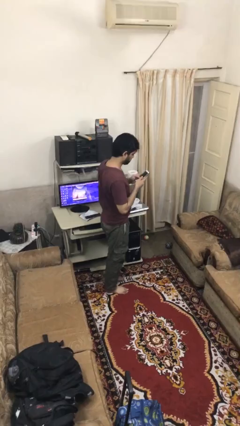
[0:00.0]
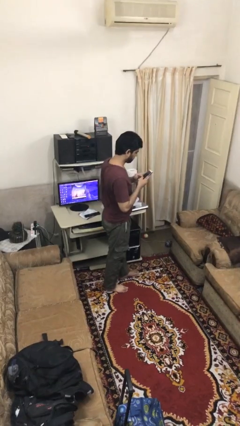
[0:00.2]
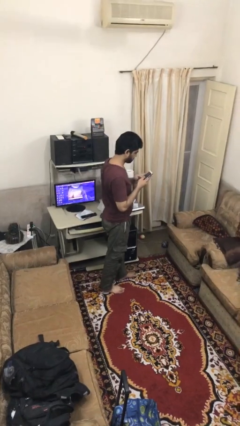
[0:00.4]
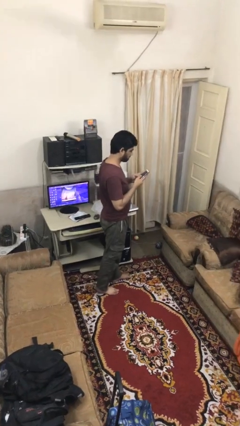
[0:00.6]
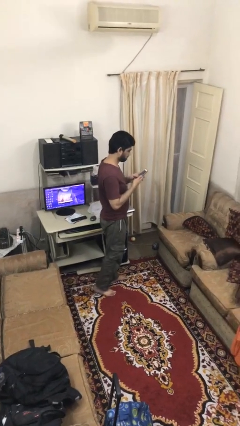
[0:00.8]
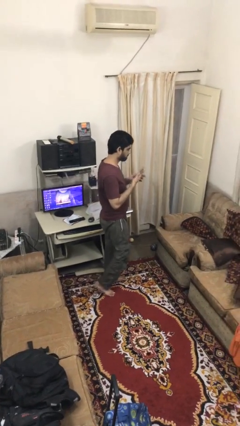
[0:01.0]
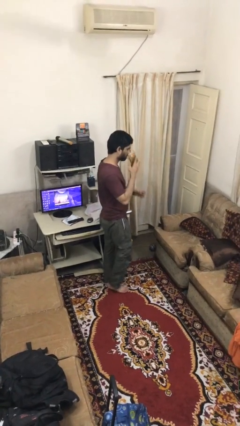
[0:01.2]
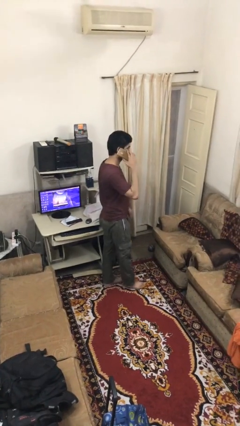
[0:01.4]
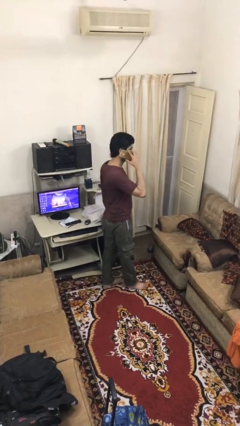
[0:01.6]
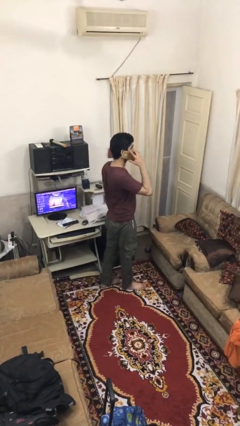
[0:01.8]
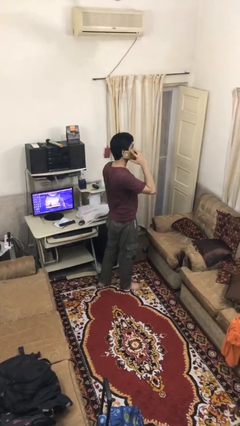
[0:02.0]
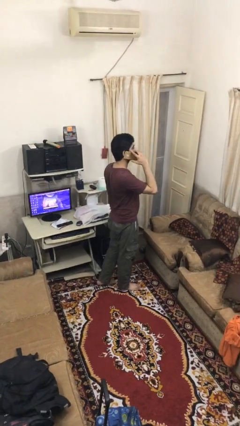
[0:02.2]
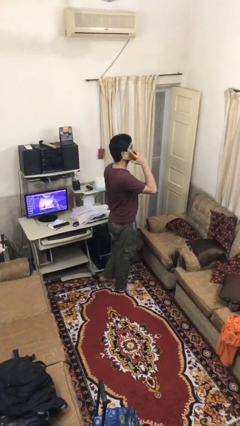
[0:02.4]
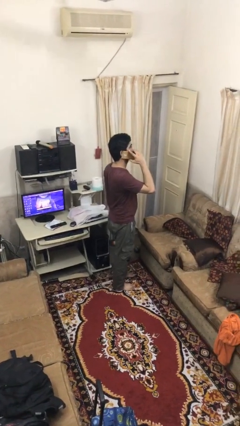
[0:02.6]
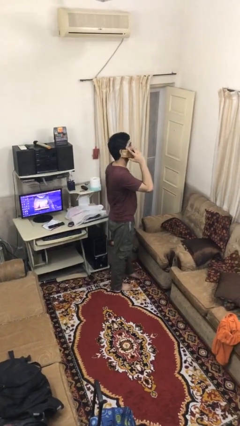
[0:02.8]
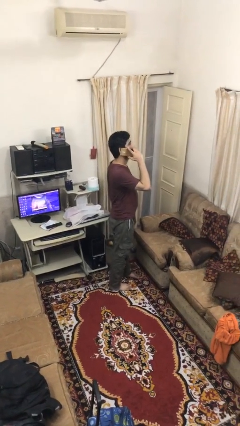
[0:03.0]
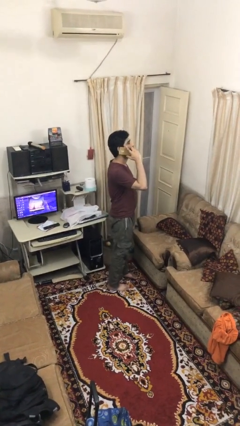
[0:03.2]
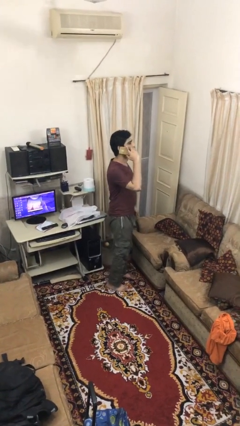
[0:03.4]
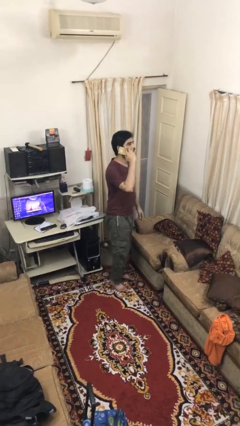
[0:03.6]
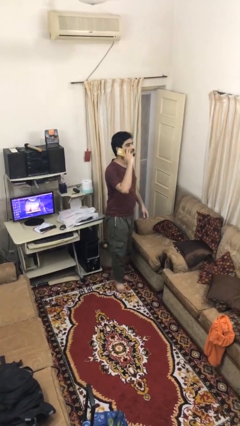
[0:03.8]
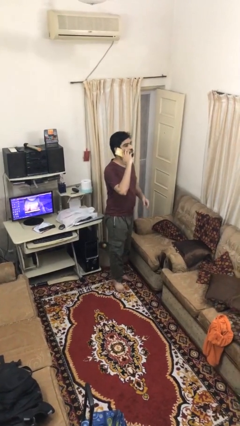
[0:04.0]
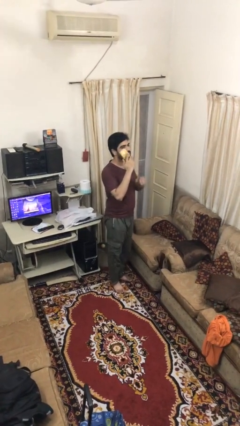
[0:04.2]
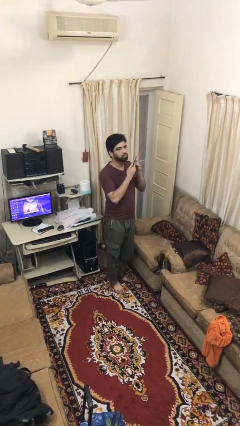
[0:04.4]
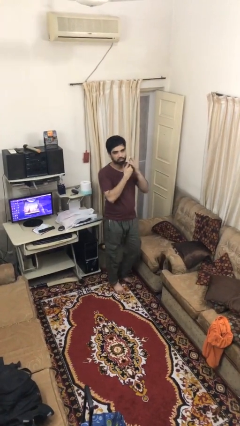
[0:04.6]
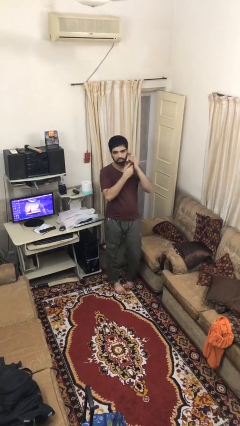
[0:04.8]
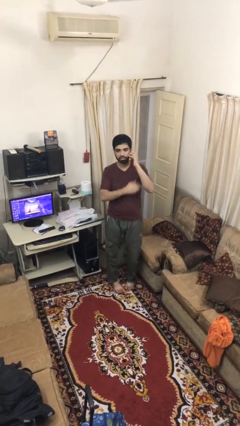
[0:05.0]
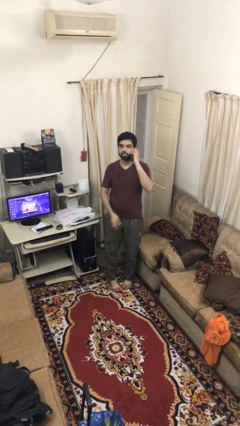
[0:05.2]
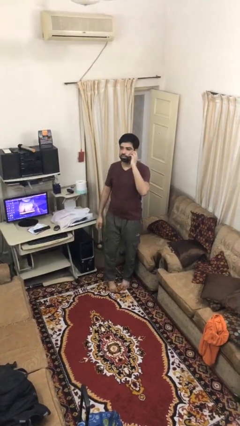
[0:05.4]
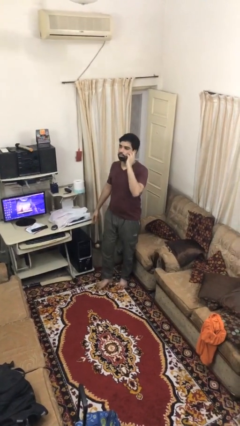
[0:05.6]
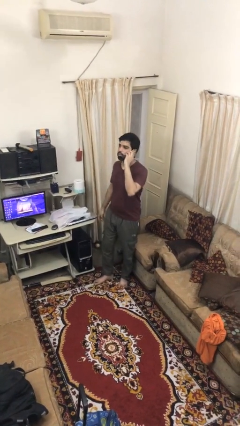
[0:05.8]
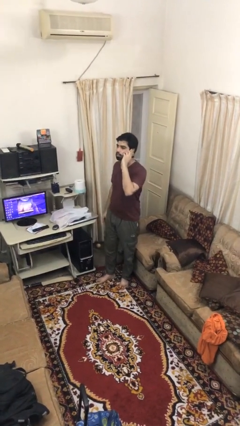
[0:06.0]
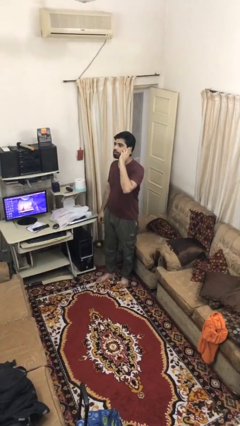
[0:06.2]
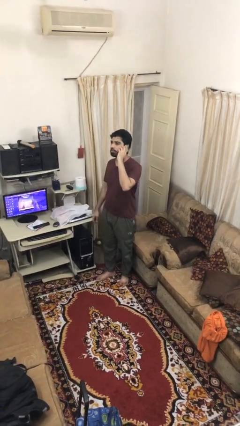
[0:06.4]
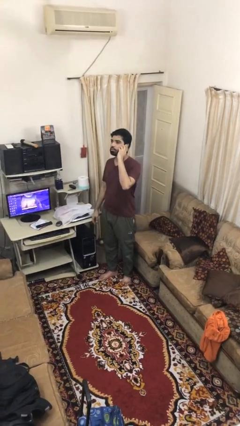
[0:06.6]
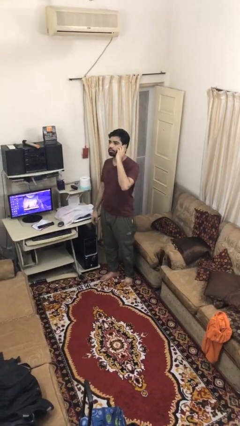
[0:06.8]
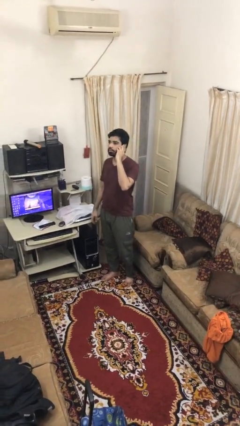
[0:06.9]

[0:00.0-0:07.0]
person talks on phone

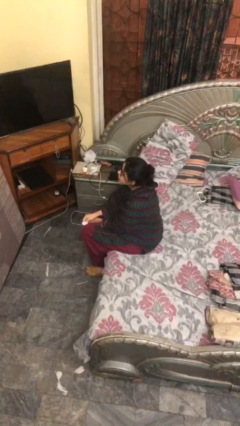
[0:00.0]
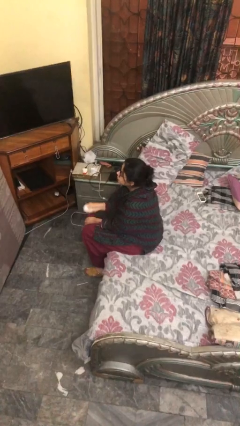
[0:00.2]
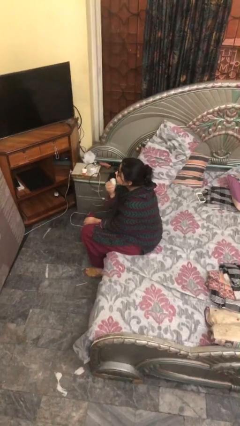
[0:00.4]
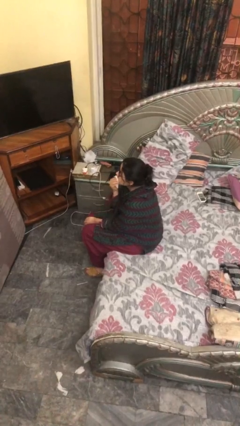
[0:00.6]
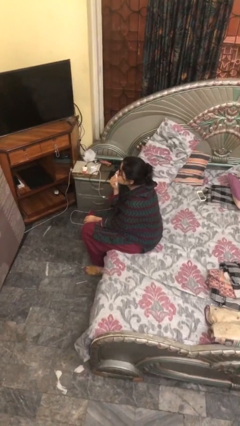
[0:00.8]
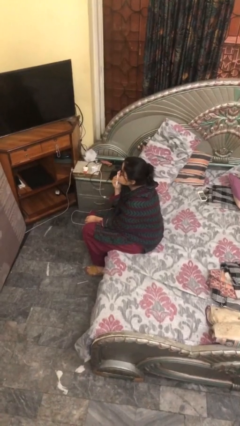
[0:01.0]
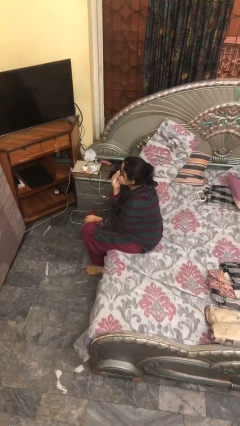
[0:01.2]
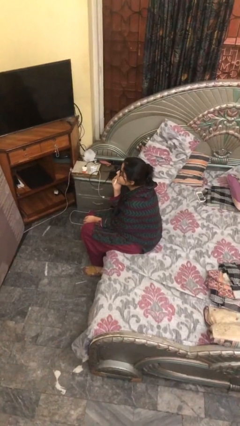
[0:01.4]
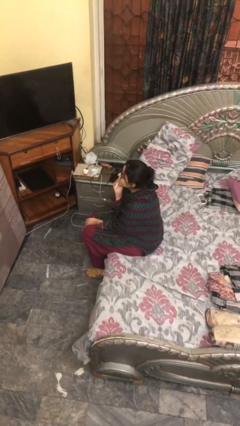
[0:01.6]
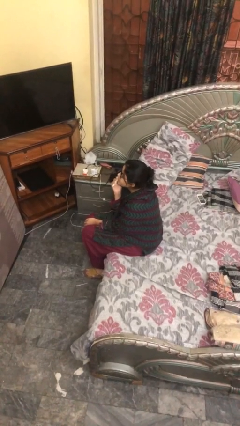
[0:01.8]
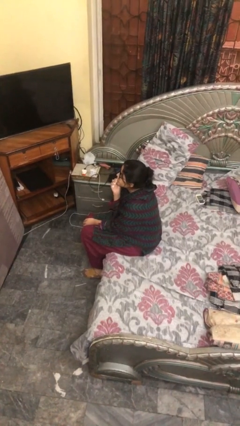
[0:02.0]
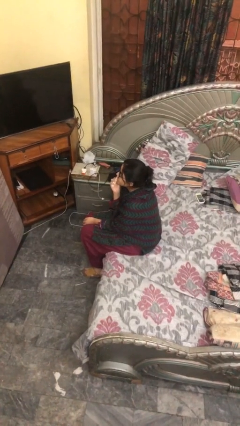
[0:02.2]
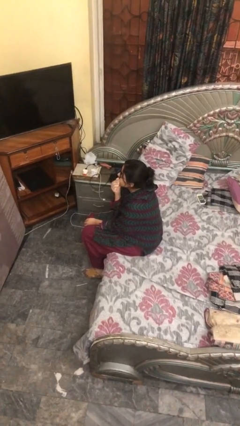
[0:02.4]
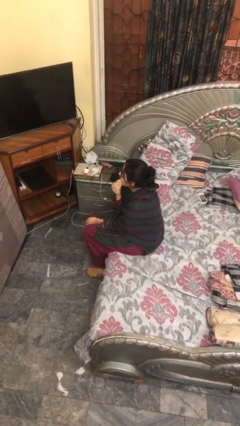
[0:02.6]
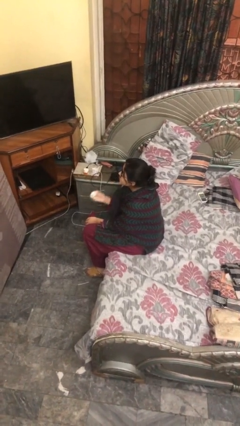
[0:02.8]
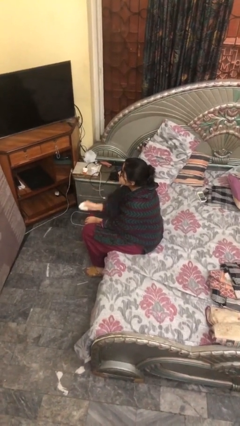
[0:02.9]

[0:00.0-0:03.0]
person wipes mouth with napkin

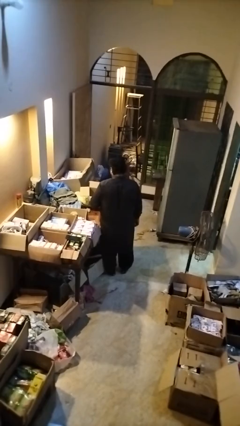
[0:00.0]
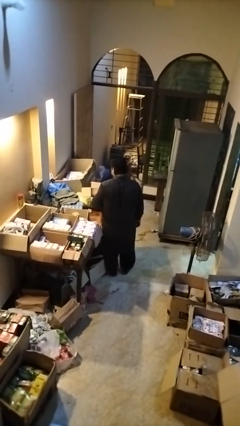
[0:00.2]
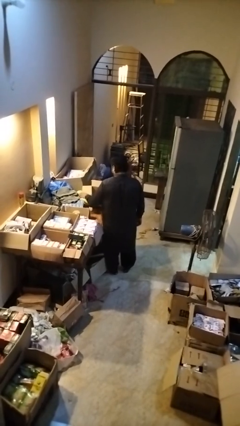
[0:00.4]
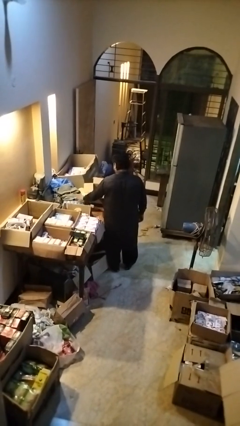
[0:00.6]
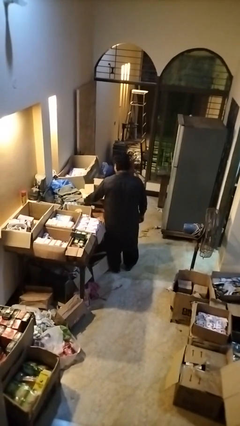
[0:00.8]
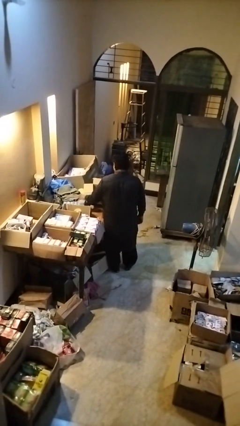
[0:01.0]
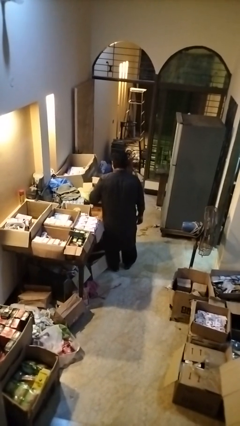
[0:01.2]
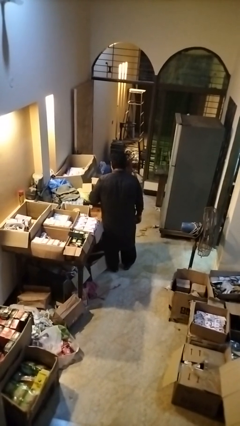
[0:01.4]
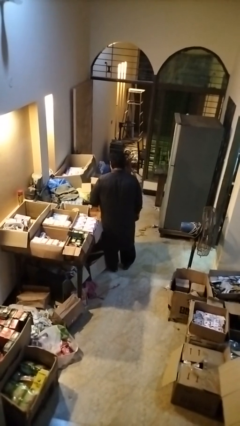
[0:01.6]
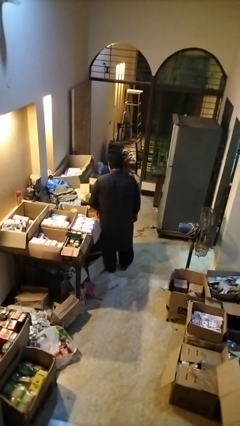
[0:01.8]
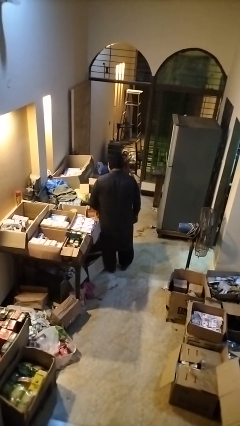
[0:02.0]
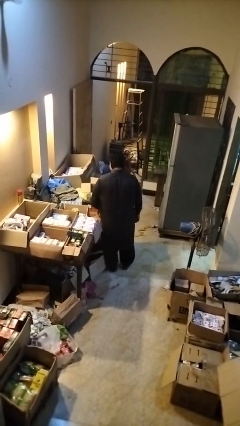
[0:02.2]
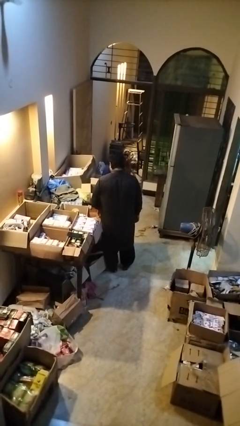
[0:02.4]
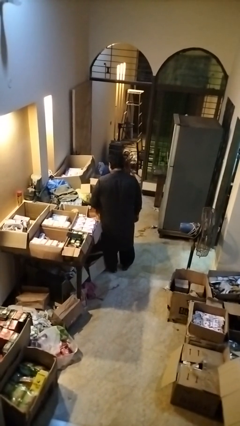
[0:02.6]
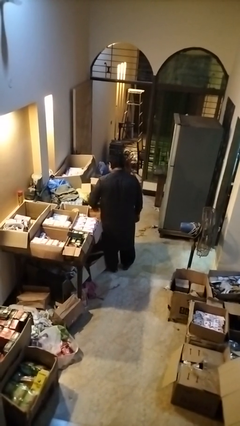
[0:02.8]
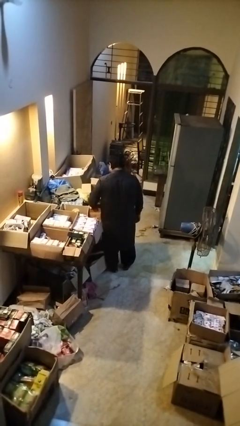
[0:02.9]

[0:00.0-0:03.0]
person puts object into box

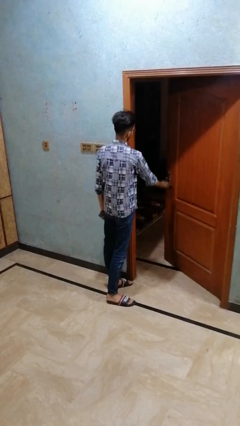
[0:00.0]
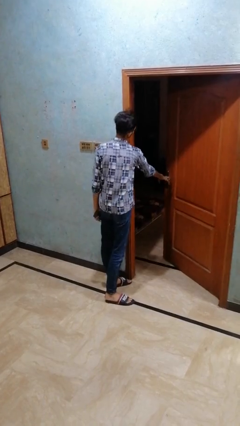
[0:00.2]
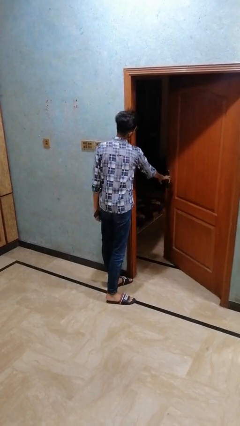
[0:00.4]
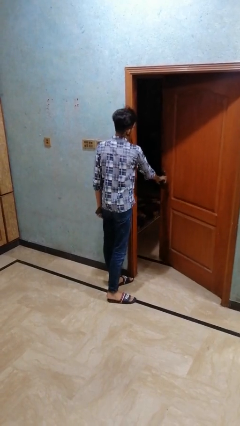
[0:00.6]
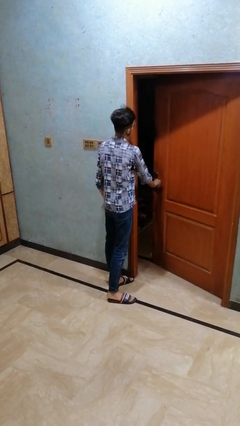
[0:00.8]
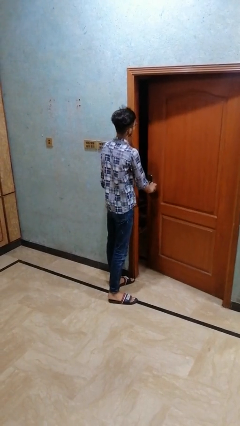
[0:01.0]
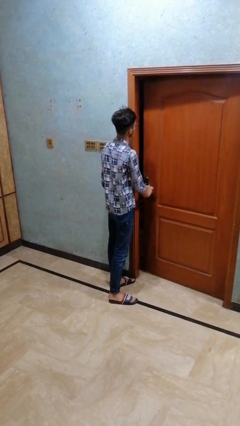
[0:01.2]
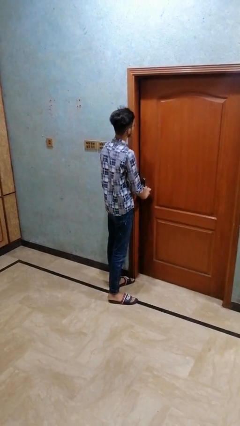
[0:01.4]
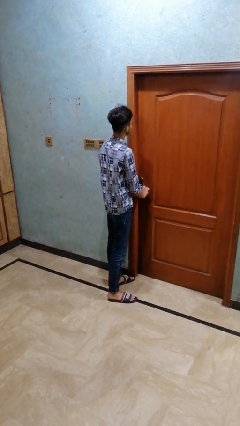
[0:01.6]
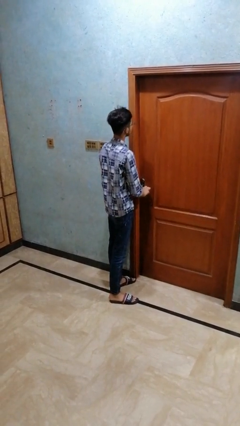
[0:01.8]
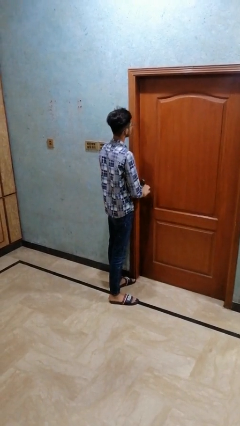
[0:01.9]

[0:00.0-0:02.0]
person closes closet door

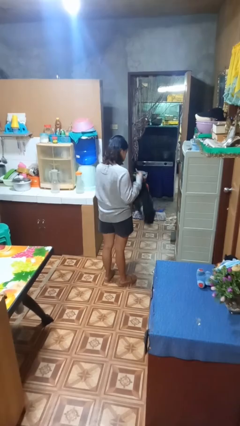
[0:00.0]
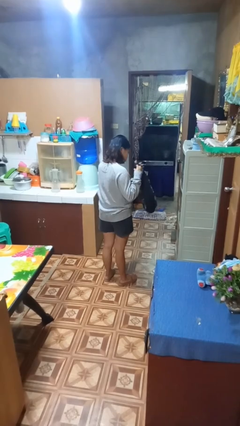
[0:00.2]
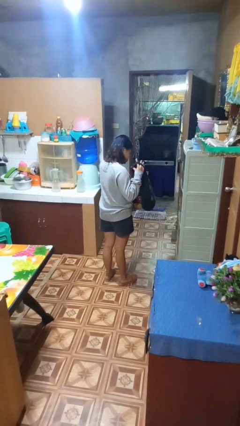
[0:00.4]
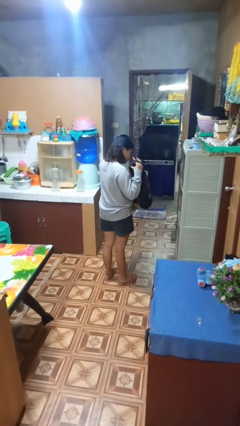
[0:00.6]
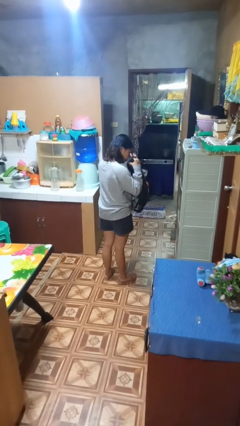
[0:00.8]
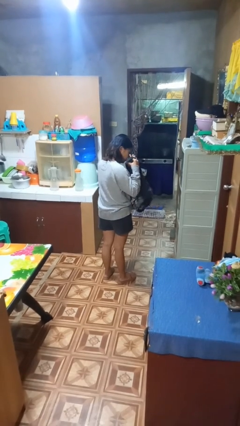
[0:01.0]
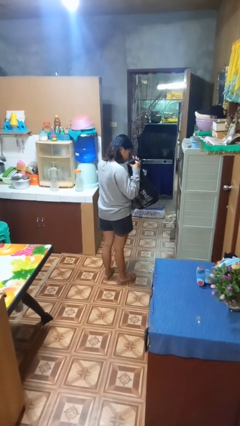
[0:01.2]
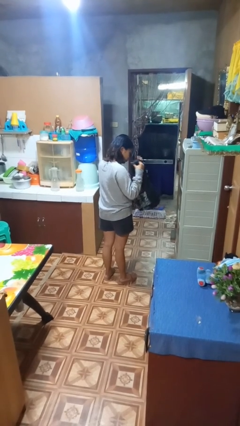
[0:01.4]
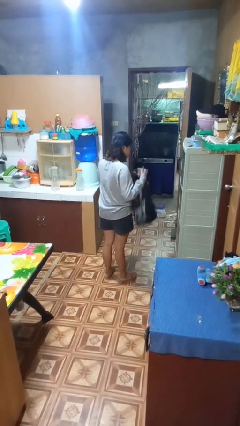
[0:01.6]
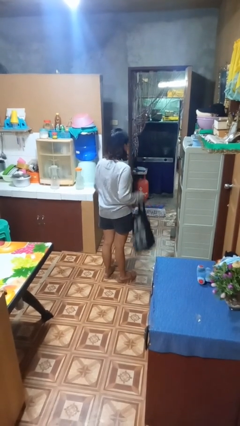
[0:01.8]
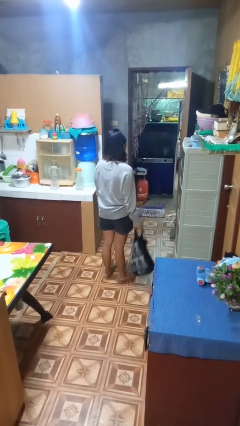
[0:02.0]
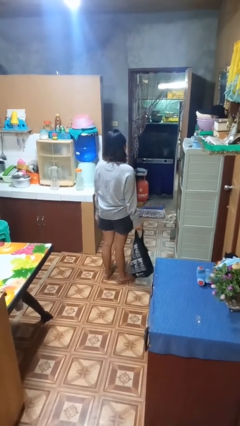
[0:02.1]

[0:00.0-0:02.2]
person searches in bag

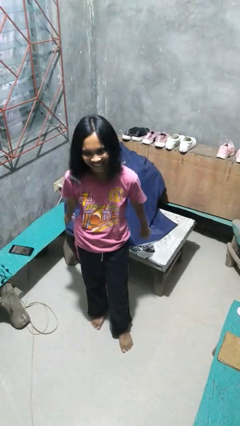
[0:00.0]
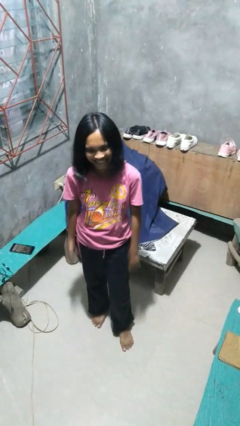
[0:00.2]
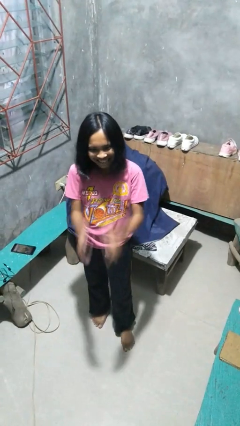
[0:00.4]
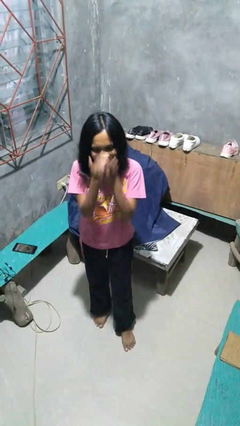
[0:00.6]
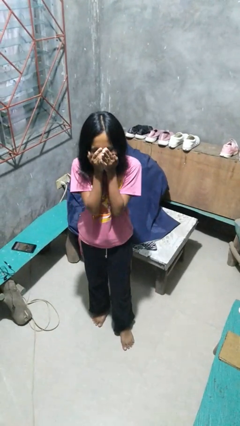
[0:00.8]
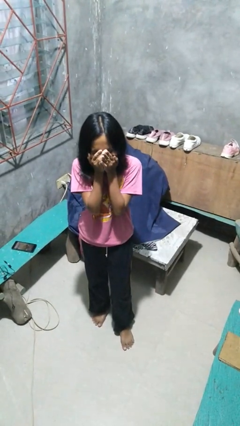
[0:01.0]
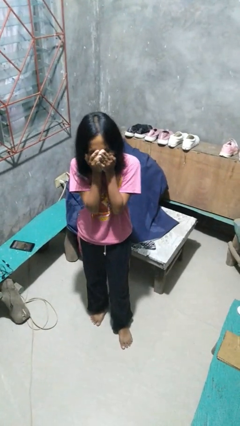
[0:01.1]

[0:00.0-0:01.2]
person yawns
